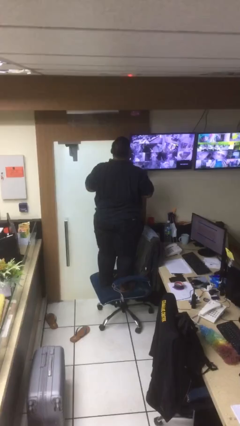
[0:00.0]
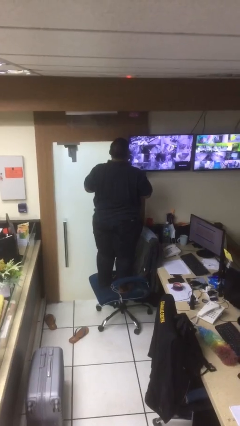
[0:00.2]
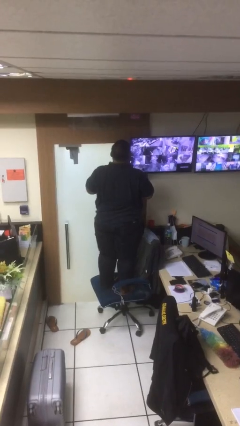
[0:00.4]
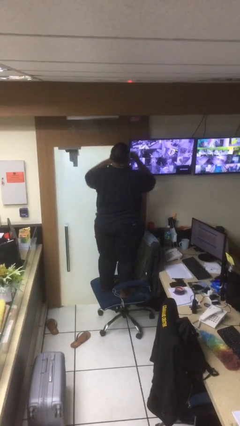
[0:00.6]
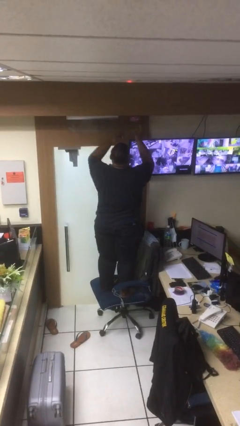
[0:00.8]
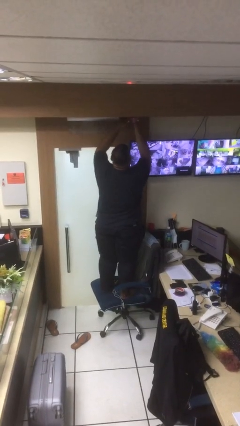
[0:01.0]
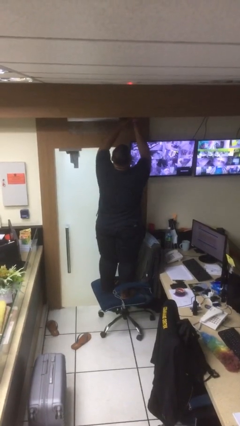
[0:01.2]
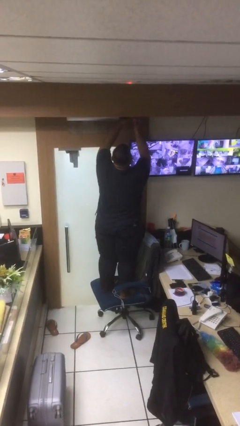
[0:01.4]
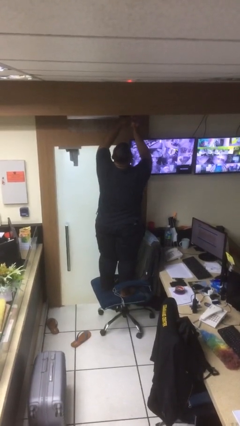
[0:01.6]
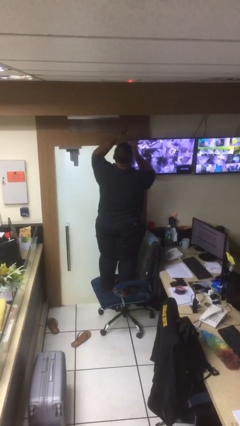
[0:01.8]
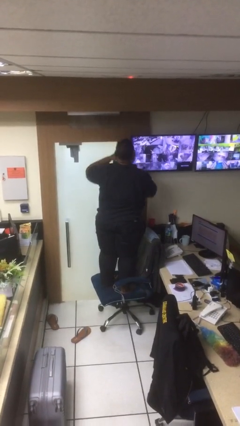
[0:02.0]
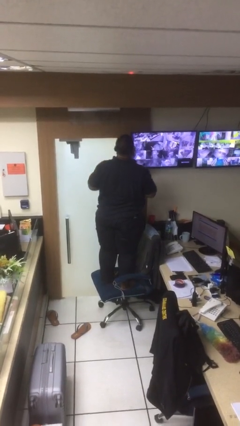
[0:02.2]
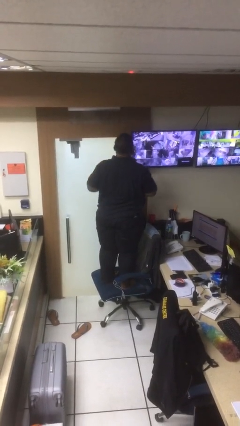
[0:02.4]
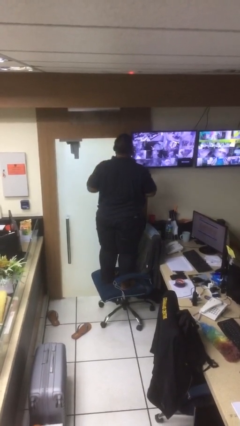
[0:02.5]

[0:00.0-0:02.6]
person takes down smoke detector

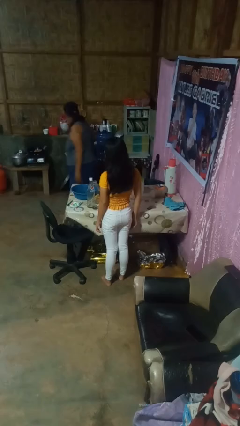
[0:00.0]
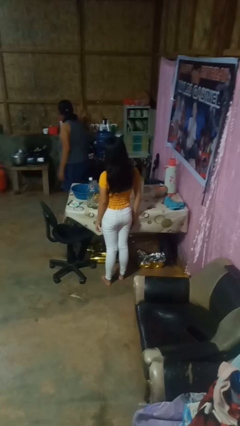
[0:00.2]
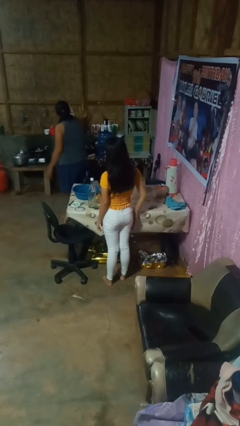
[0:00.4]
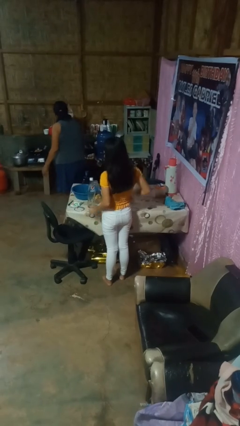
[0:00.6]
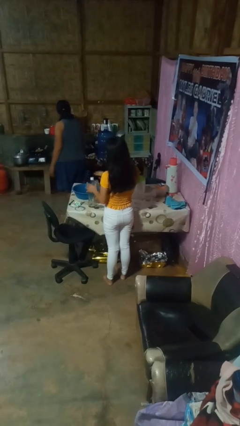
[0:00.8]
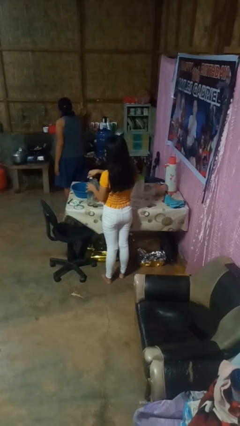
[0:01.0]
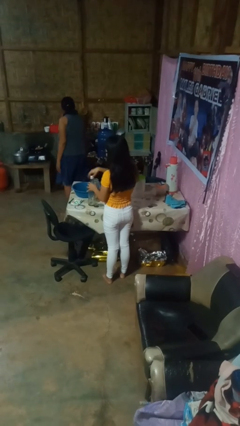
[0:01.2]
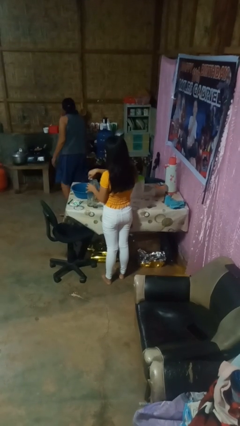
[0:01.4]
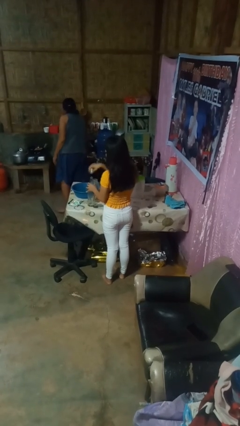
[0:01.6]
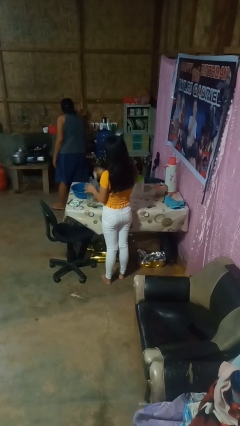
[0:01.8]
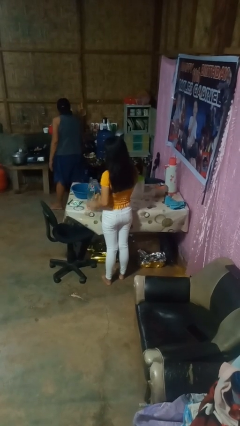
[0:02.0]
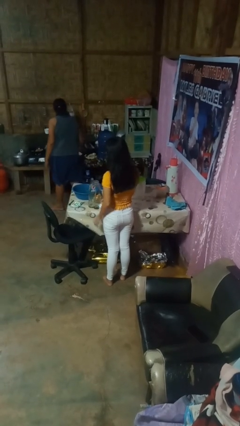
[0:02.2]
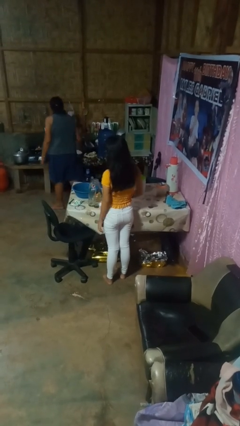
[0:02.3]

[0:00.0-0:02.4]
person unscrews lid from bottle

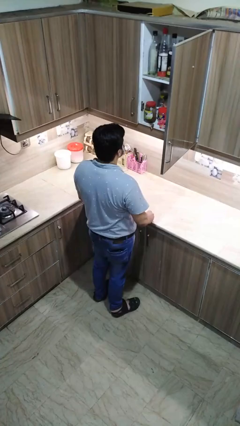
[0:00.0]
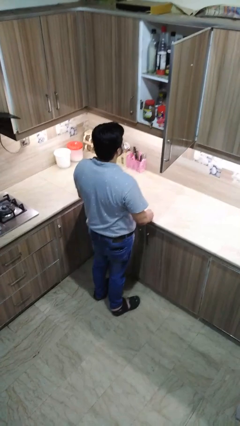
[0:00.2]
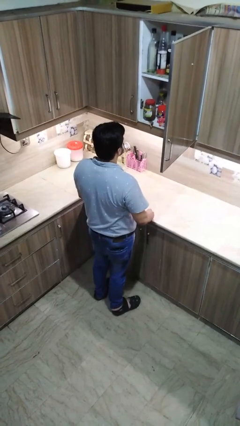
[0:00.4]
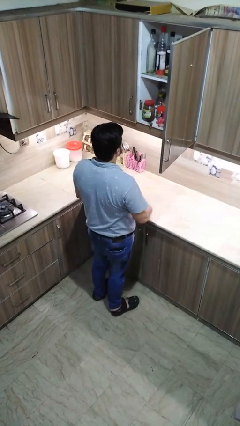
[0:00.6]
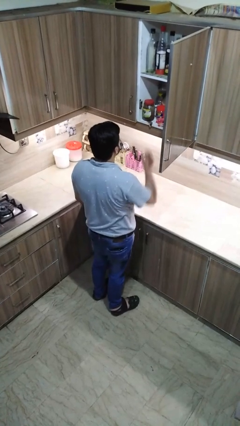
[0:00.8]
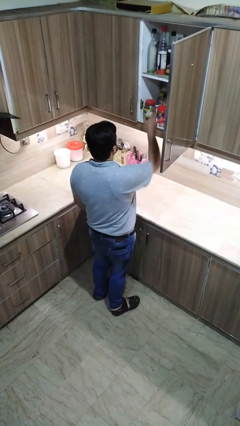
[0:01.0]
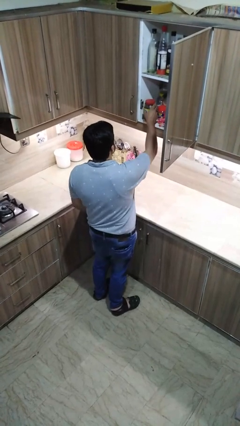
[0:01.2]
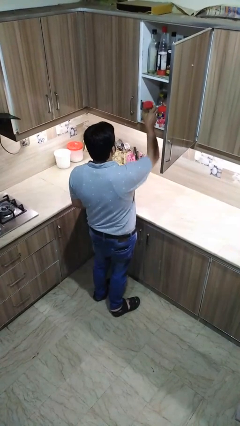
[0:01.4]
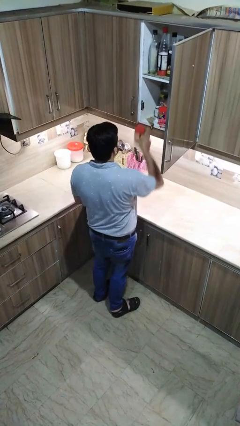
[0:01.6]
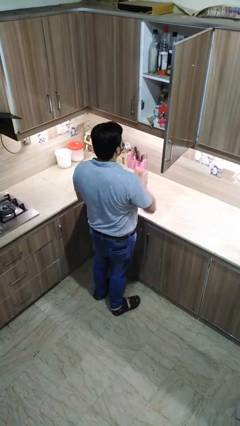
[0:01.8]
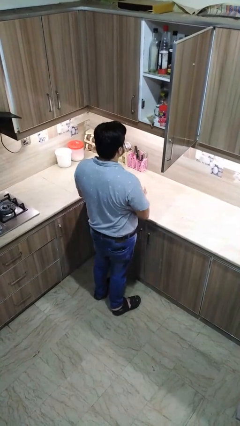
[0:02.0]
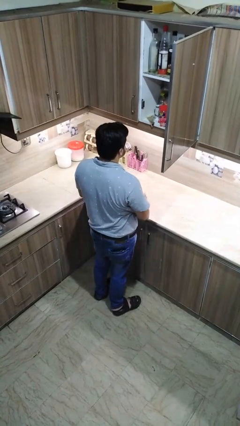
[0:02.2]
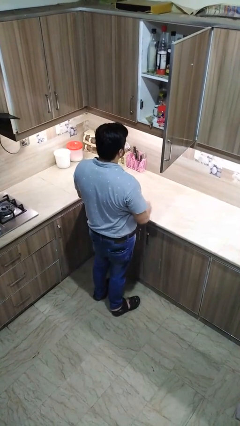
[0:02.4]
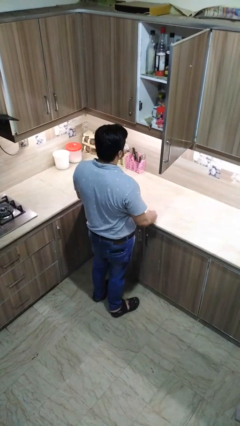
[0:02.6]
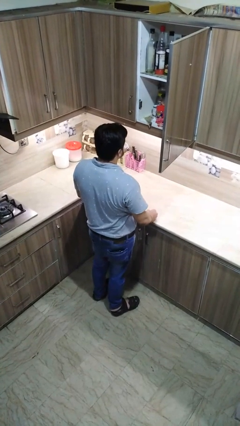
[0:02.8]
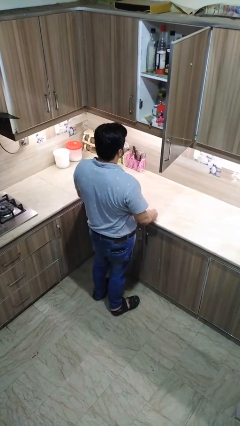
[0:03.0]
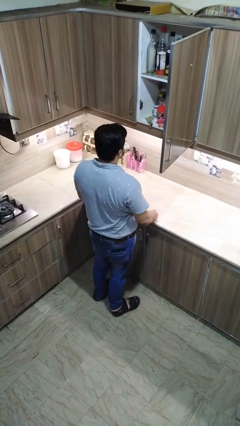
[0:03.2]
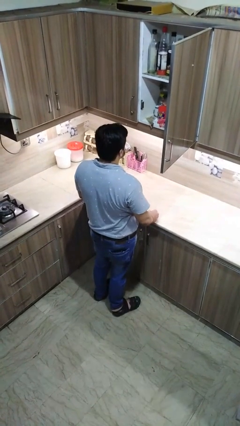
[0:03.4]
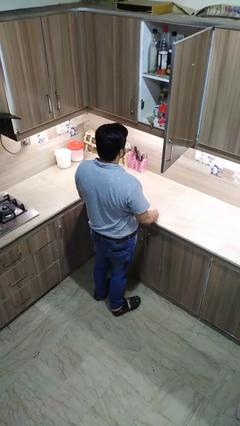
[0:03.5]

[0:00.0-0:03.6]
person puts object in cabinet

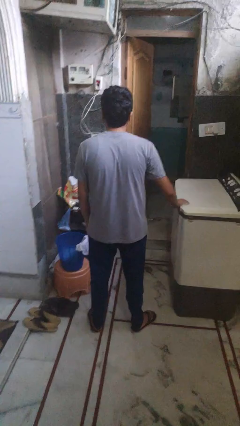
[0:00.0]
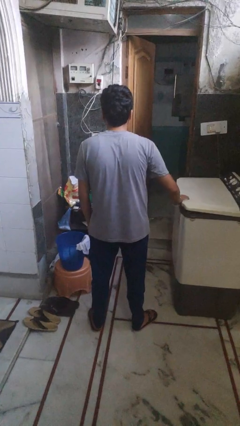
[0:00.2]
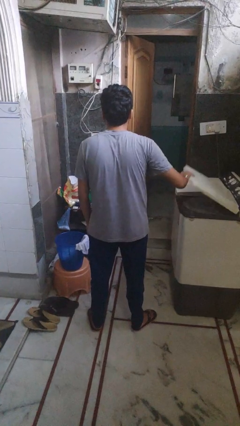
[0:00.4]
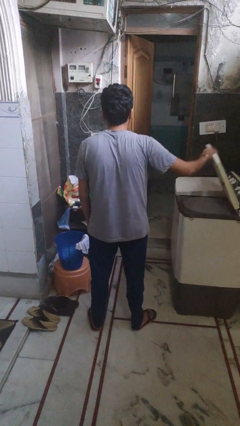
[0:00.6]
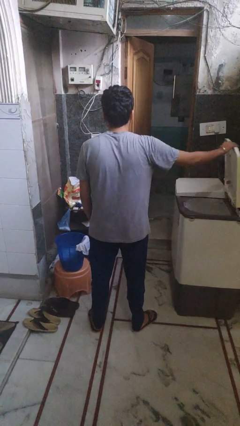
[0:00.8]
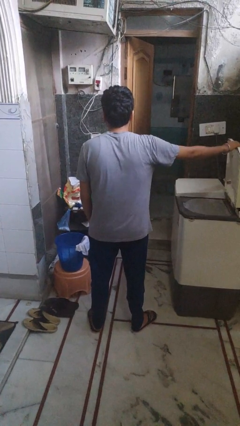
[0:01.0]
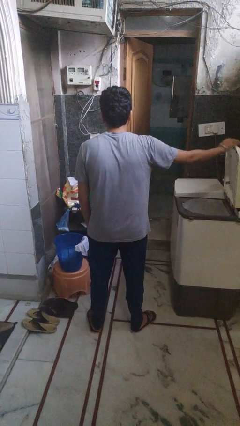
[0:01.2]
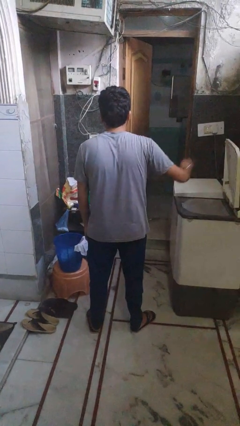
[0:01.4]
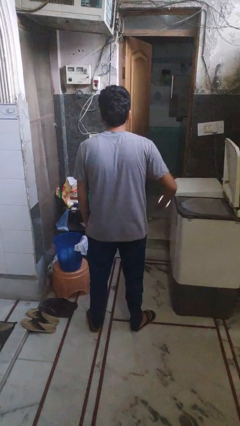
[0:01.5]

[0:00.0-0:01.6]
person opens clothes washer

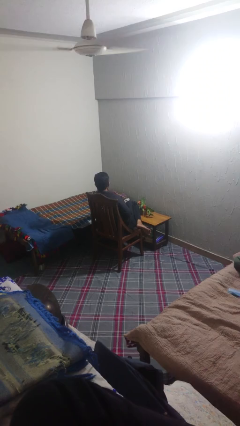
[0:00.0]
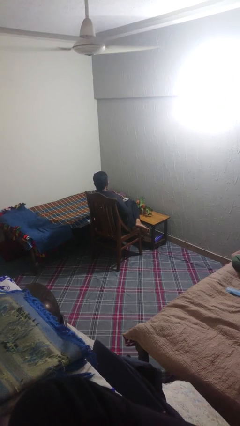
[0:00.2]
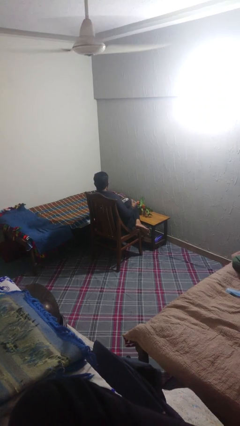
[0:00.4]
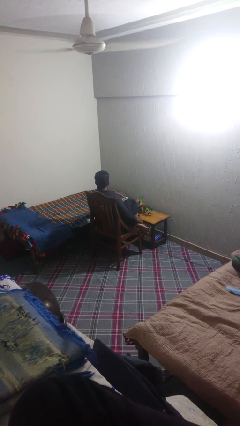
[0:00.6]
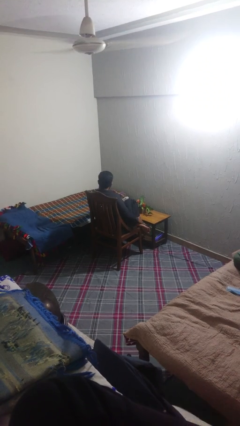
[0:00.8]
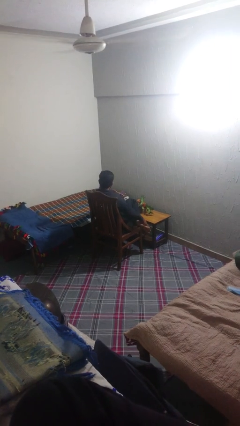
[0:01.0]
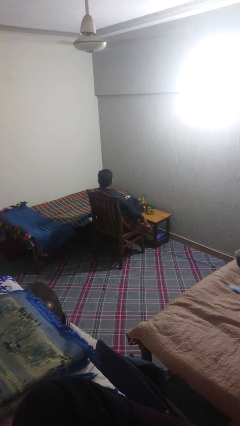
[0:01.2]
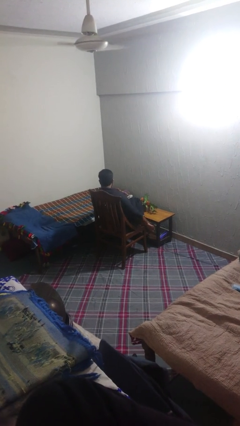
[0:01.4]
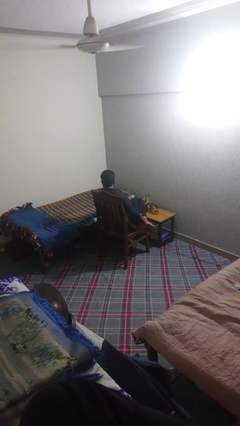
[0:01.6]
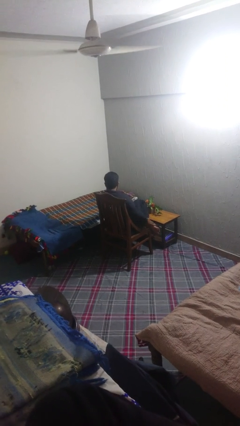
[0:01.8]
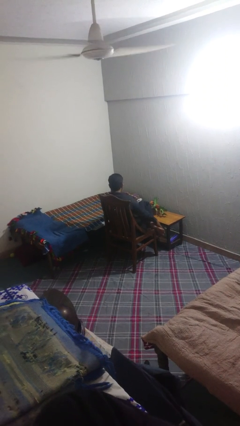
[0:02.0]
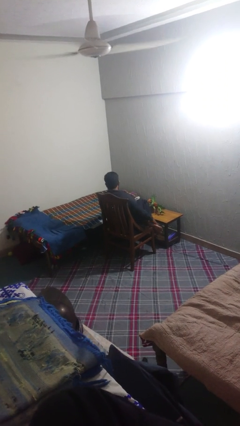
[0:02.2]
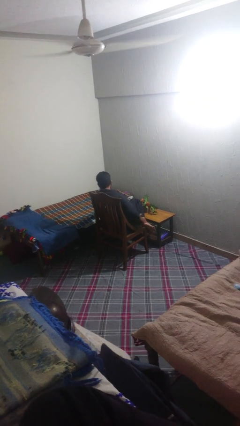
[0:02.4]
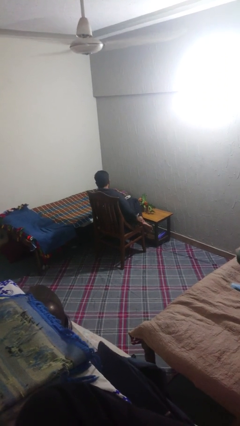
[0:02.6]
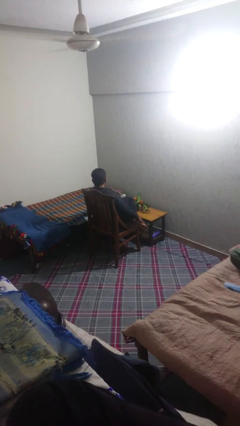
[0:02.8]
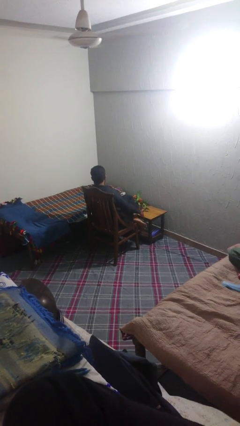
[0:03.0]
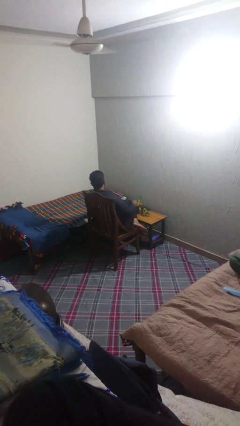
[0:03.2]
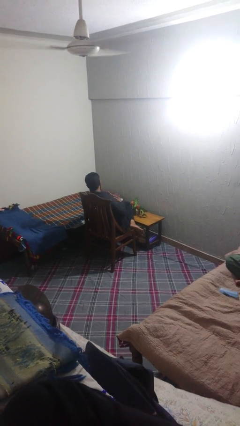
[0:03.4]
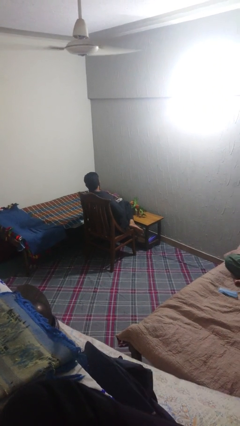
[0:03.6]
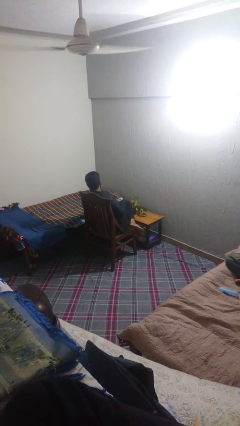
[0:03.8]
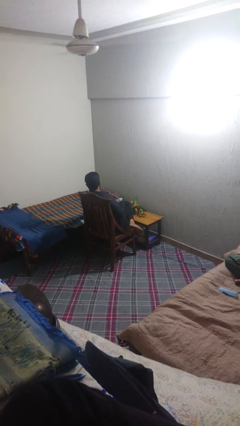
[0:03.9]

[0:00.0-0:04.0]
person rubs foot

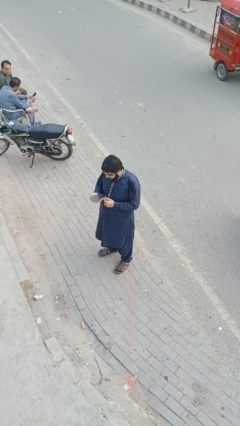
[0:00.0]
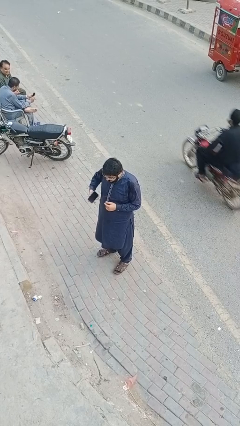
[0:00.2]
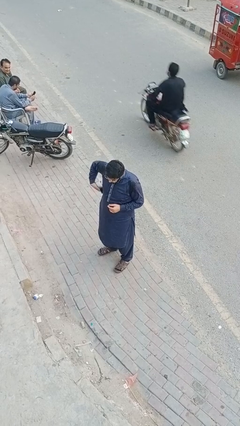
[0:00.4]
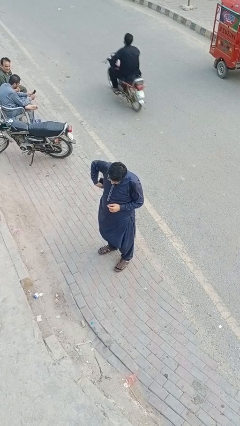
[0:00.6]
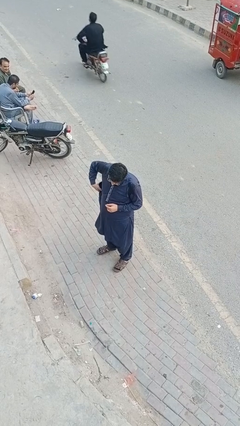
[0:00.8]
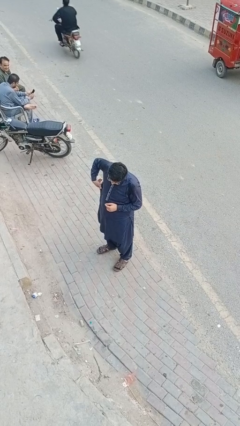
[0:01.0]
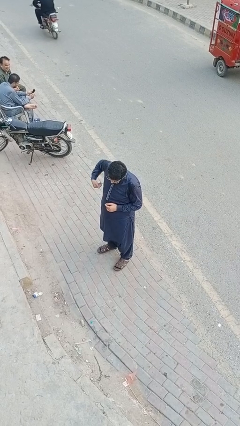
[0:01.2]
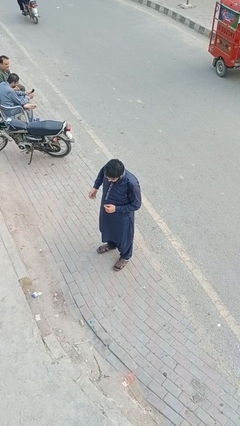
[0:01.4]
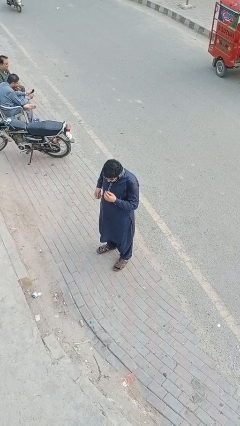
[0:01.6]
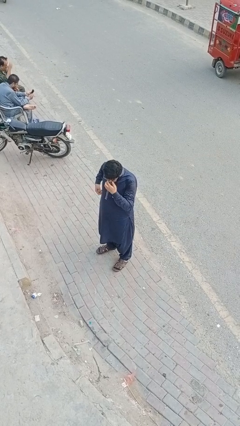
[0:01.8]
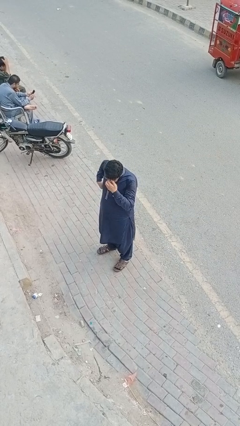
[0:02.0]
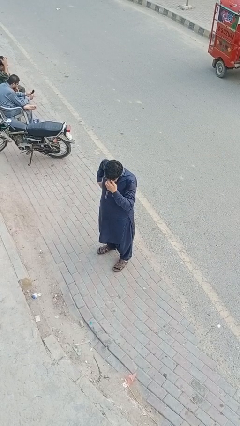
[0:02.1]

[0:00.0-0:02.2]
person puts phone into pocket

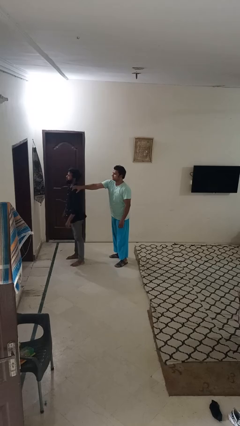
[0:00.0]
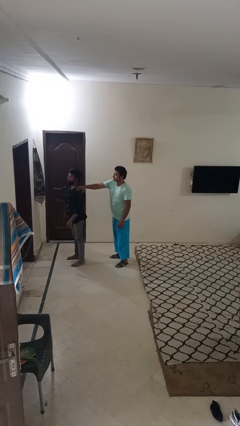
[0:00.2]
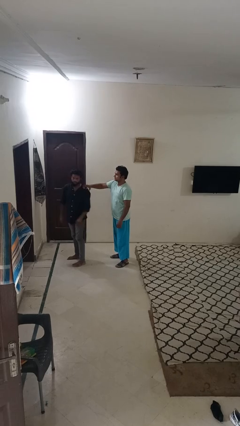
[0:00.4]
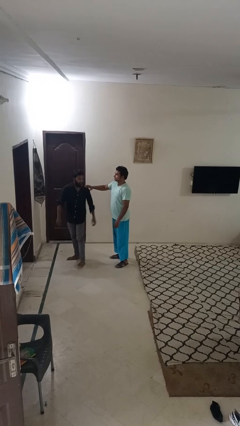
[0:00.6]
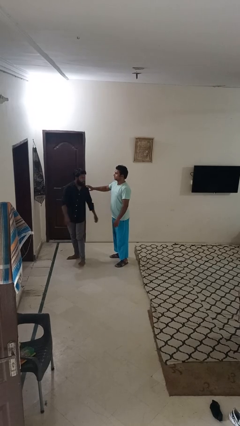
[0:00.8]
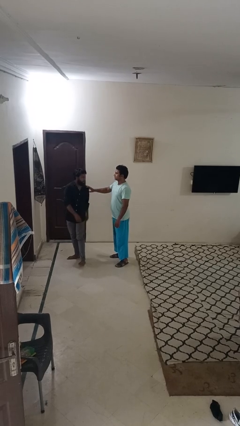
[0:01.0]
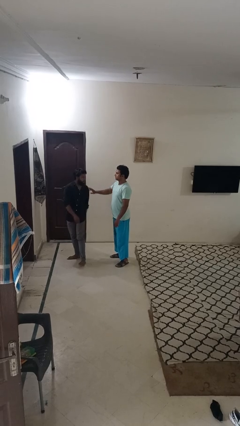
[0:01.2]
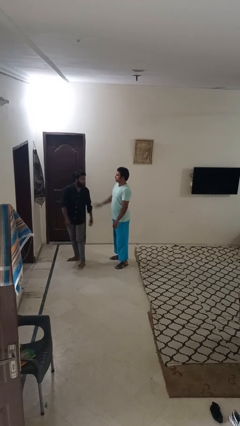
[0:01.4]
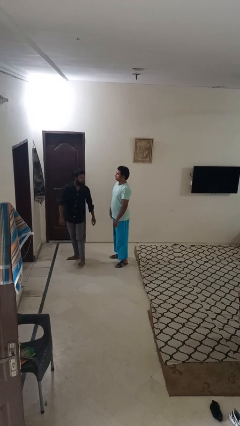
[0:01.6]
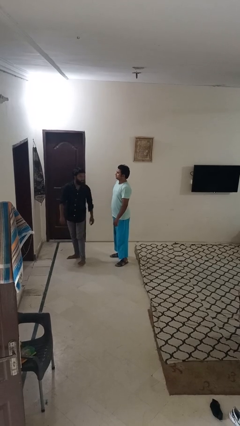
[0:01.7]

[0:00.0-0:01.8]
person spins person around
